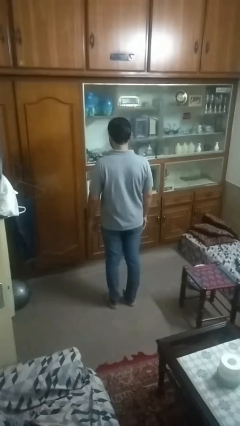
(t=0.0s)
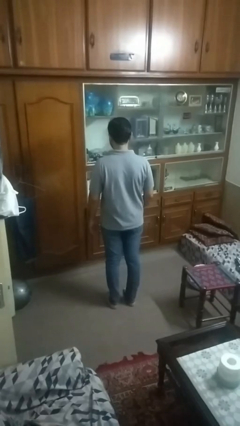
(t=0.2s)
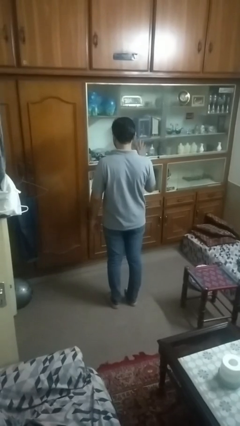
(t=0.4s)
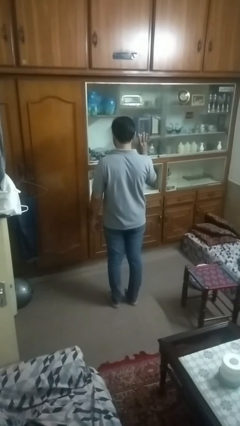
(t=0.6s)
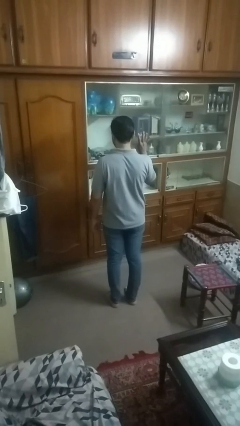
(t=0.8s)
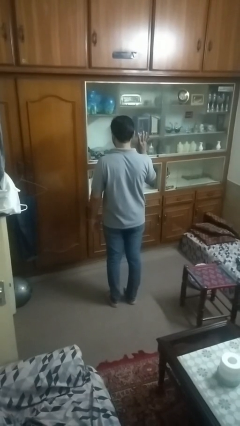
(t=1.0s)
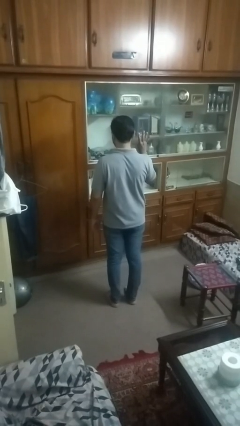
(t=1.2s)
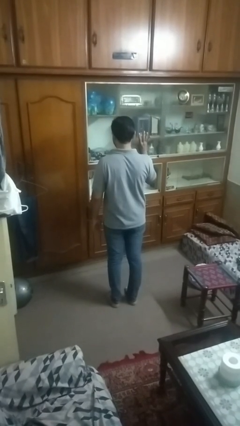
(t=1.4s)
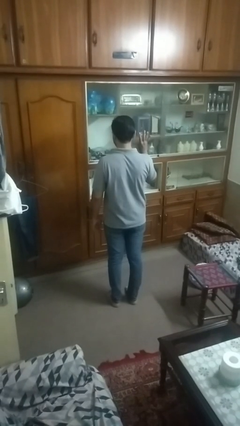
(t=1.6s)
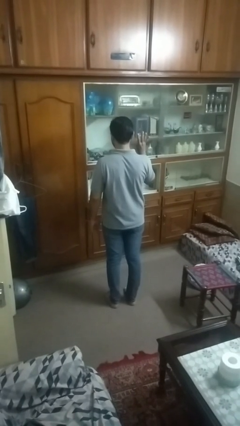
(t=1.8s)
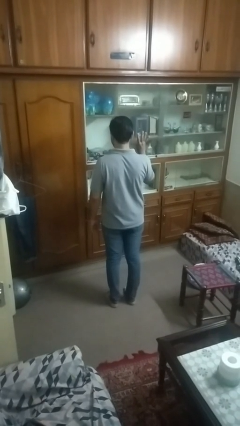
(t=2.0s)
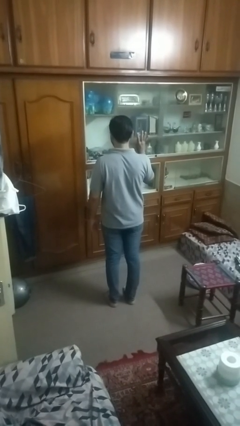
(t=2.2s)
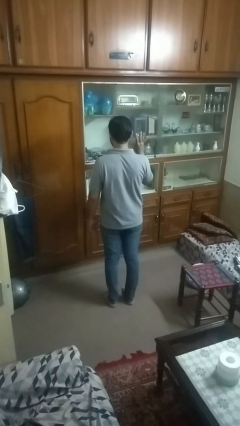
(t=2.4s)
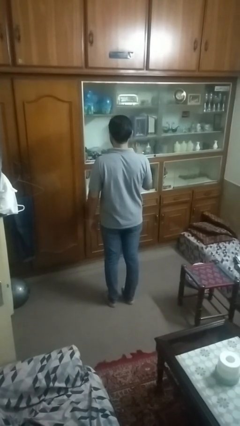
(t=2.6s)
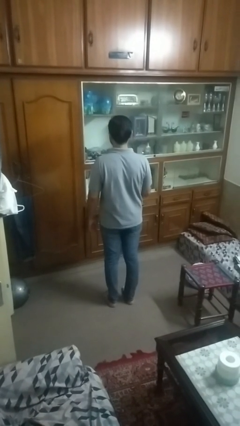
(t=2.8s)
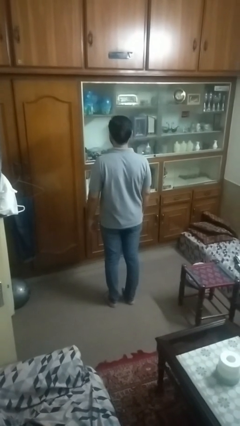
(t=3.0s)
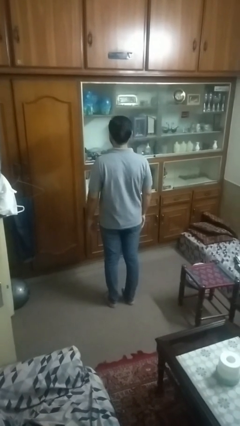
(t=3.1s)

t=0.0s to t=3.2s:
person gestures number four

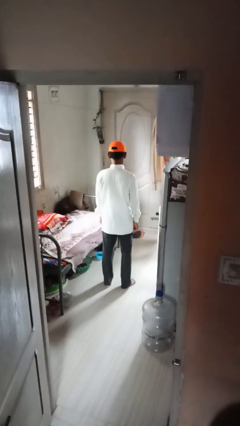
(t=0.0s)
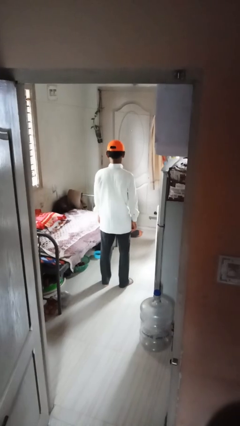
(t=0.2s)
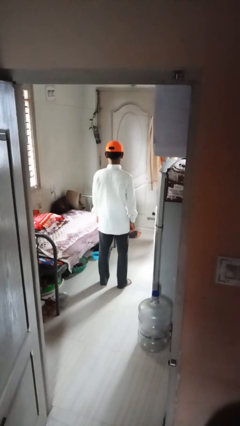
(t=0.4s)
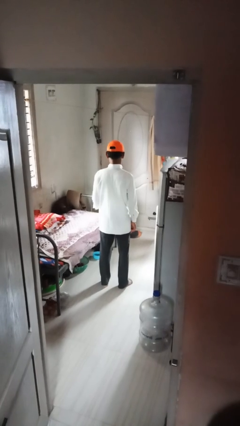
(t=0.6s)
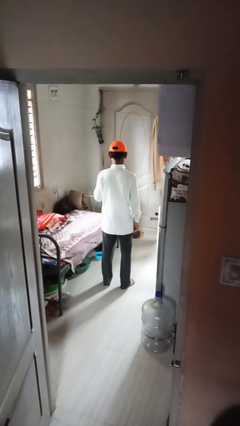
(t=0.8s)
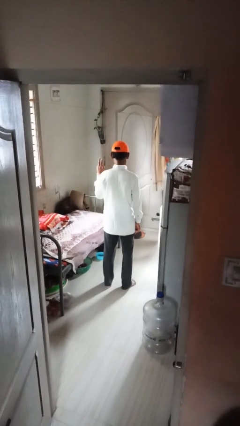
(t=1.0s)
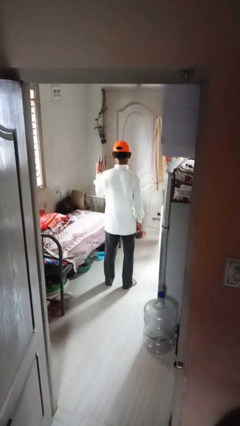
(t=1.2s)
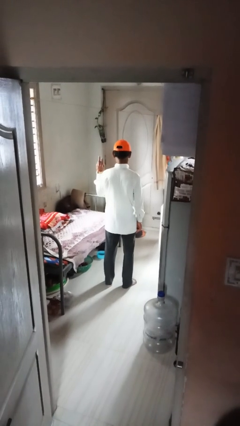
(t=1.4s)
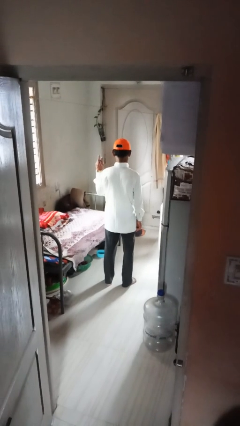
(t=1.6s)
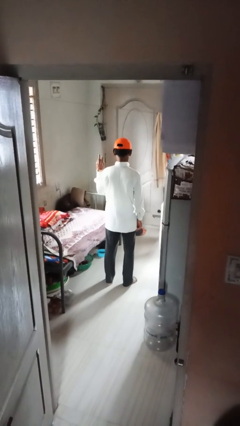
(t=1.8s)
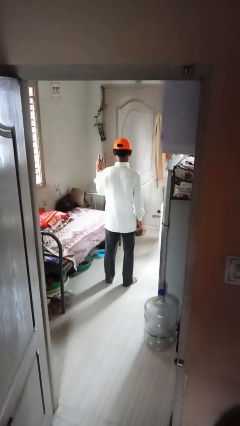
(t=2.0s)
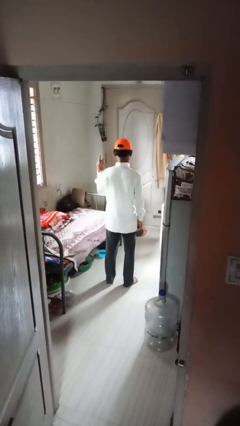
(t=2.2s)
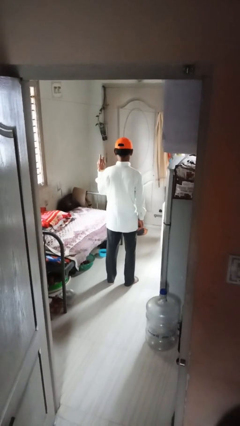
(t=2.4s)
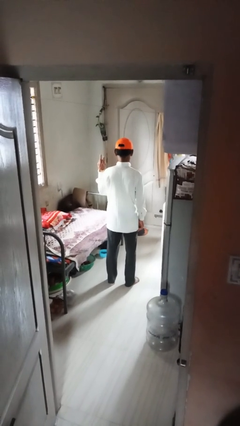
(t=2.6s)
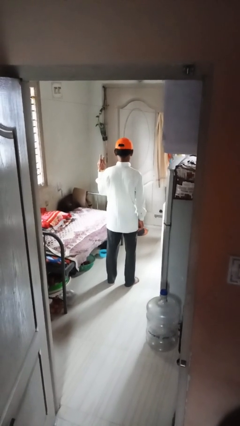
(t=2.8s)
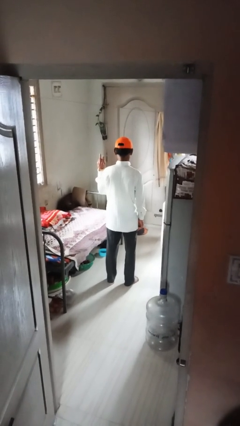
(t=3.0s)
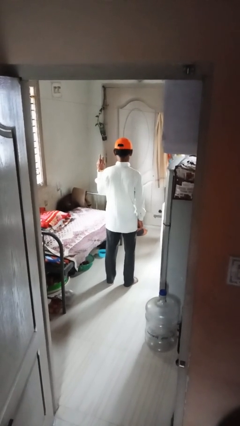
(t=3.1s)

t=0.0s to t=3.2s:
person gestures peace

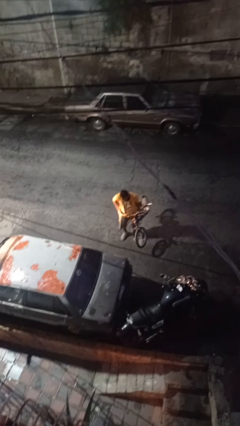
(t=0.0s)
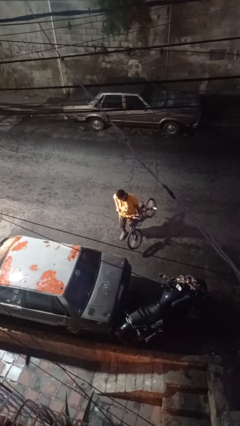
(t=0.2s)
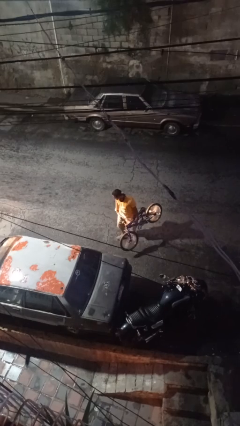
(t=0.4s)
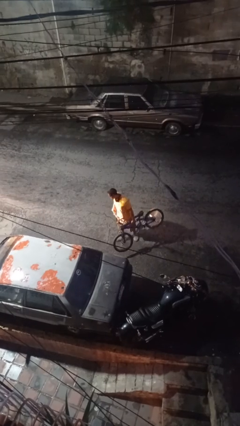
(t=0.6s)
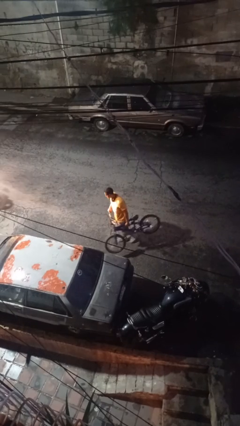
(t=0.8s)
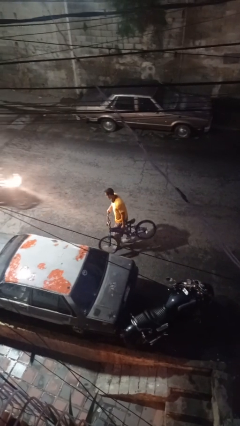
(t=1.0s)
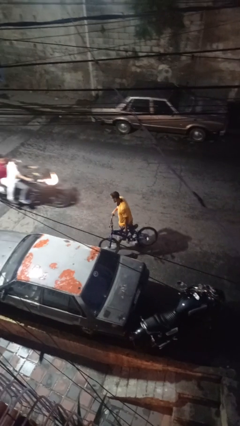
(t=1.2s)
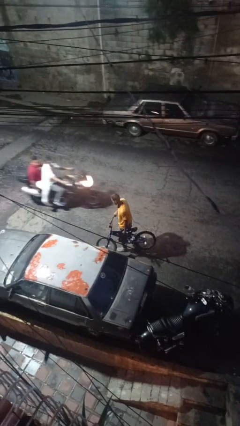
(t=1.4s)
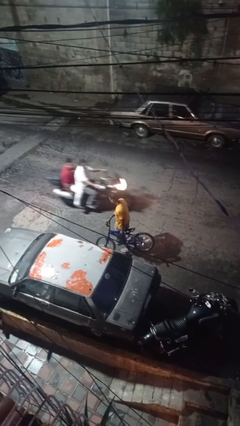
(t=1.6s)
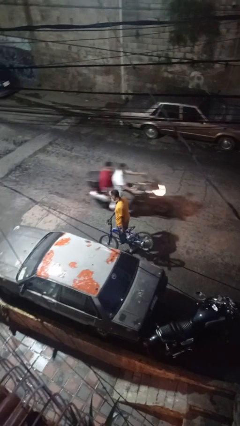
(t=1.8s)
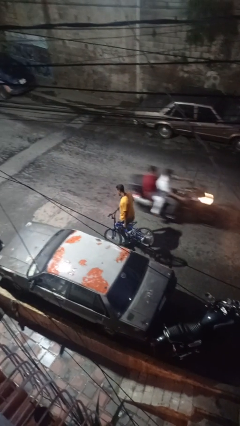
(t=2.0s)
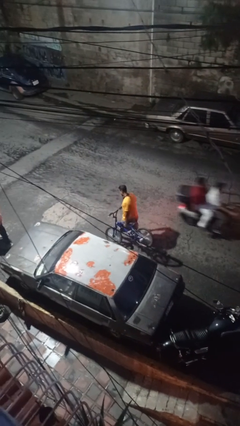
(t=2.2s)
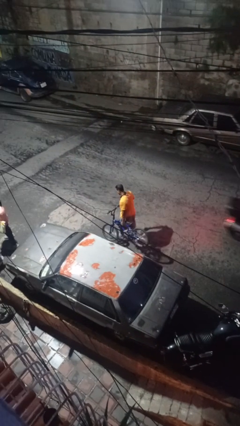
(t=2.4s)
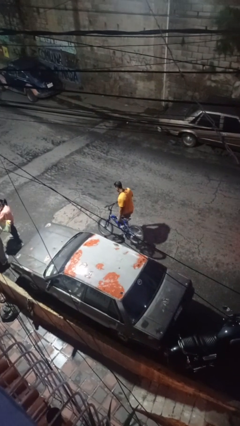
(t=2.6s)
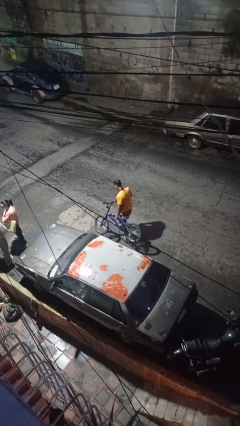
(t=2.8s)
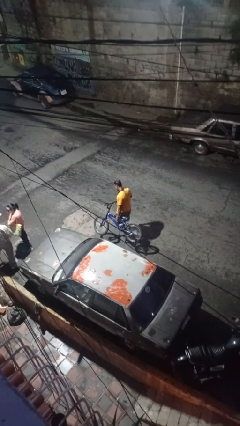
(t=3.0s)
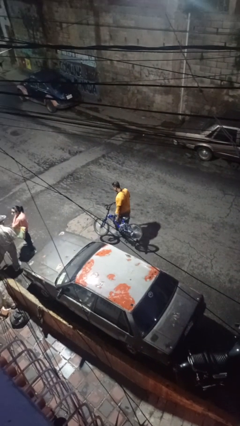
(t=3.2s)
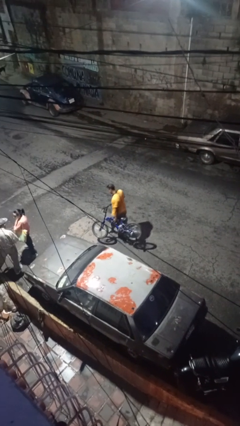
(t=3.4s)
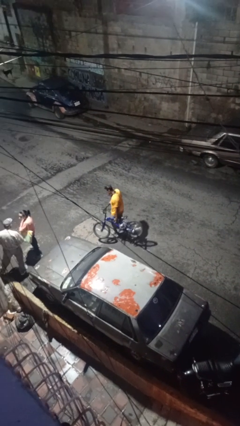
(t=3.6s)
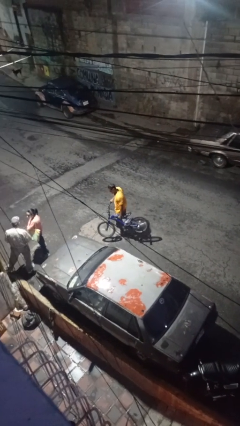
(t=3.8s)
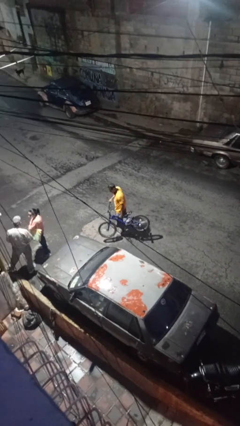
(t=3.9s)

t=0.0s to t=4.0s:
person carries bicycle

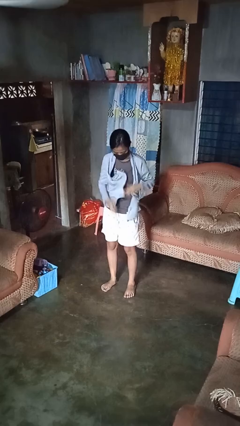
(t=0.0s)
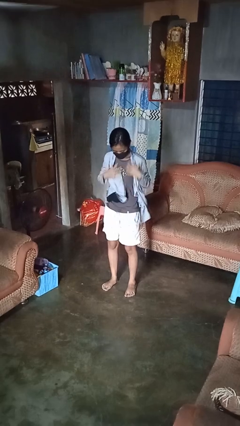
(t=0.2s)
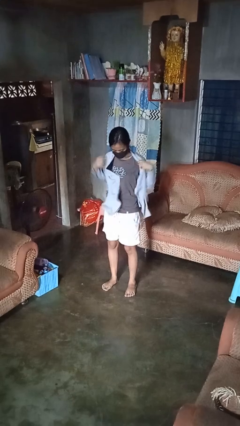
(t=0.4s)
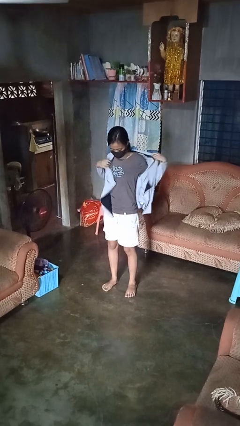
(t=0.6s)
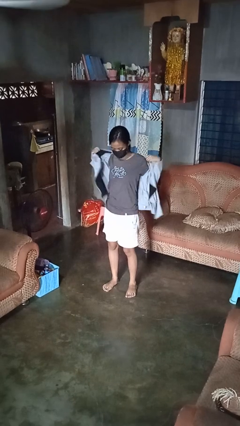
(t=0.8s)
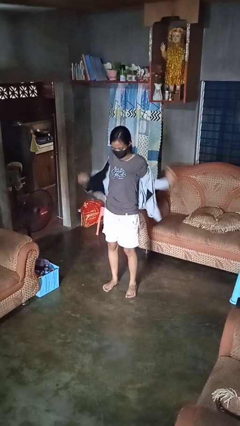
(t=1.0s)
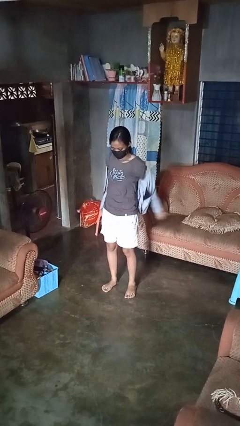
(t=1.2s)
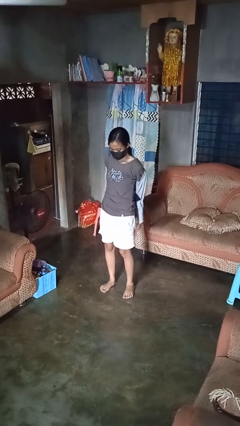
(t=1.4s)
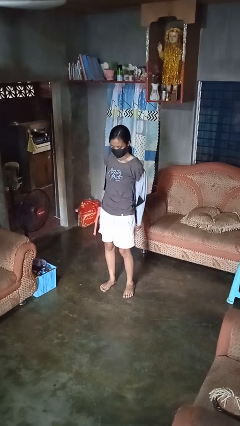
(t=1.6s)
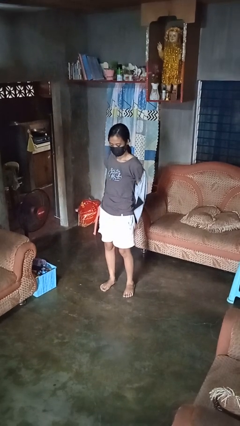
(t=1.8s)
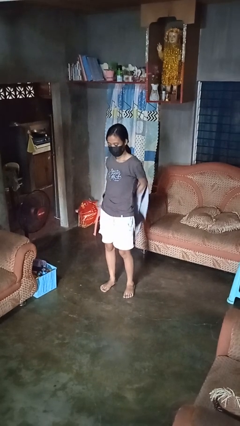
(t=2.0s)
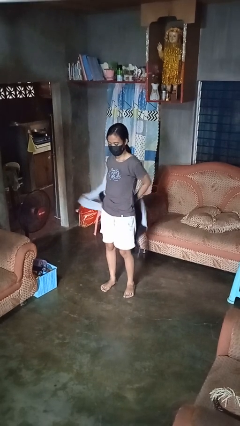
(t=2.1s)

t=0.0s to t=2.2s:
person takes off jacket

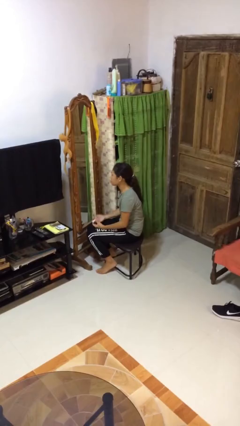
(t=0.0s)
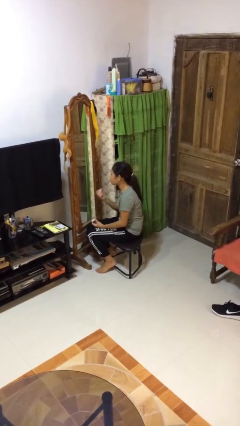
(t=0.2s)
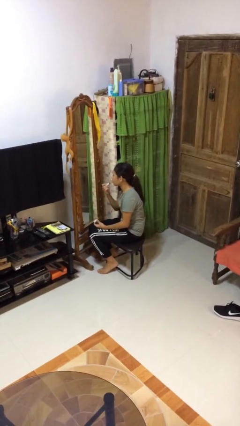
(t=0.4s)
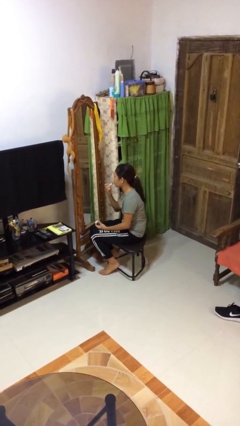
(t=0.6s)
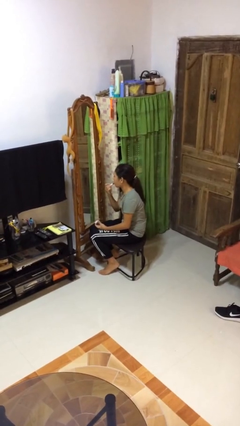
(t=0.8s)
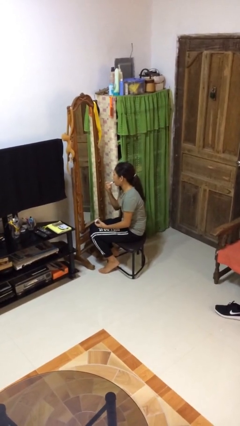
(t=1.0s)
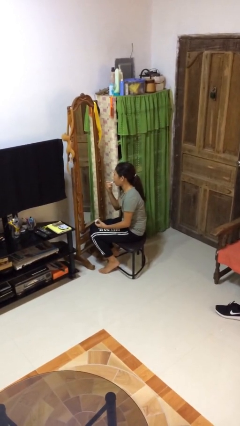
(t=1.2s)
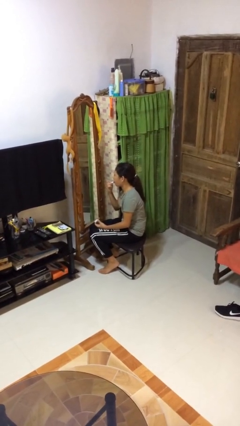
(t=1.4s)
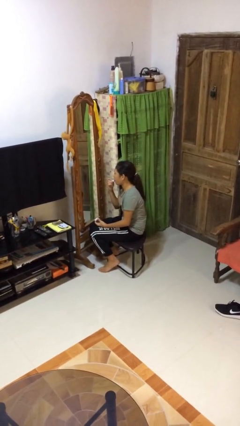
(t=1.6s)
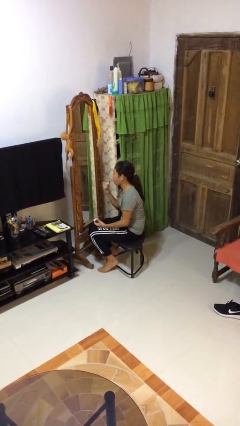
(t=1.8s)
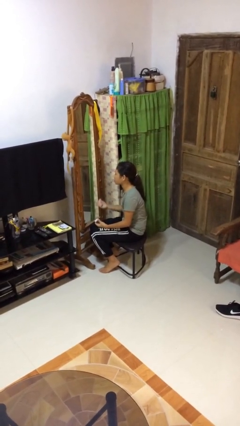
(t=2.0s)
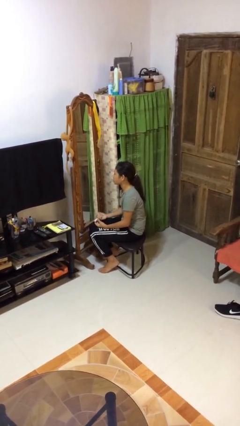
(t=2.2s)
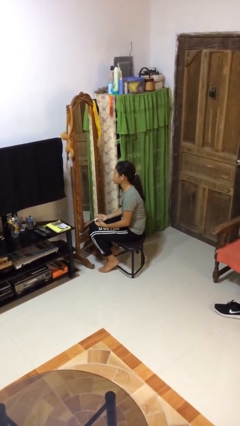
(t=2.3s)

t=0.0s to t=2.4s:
person applies lip makeup

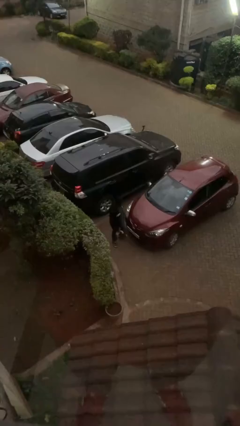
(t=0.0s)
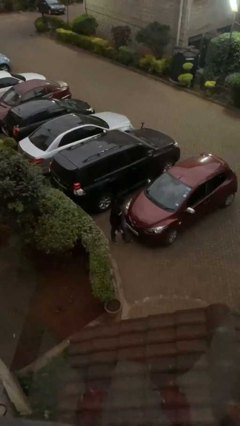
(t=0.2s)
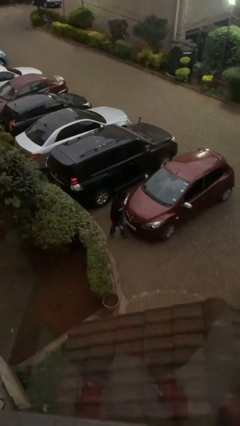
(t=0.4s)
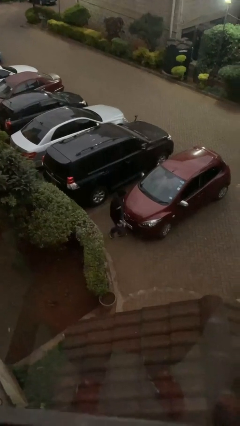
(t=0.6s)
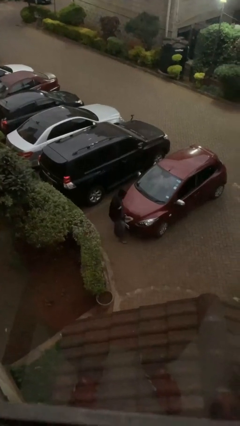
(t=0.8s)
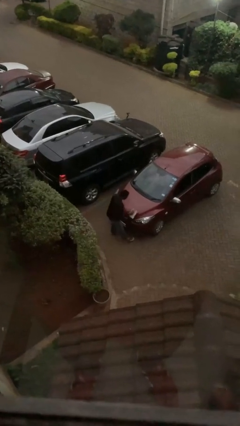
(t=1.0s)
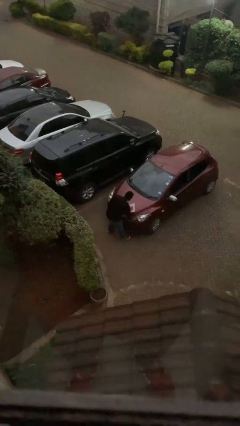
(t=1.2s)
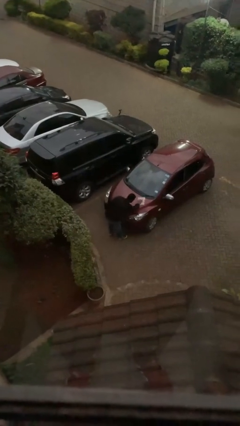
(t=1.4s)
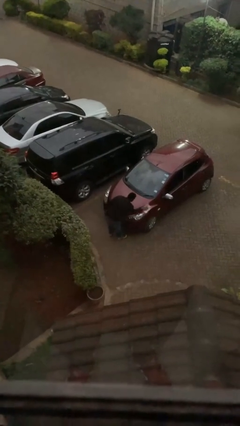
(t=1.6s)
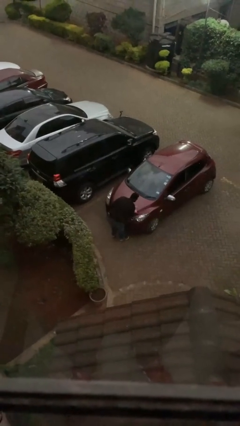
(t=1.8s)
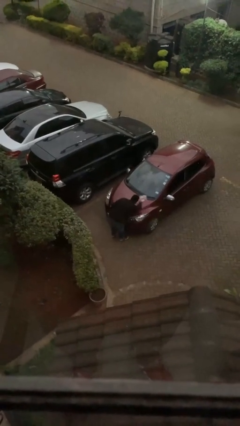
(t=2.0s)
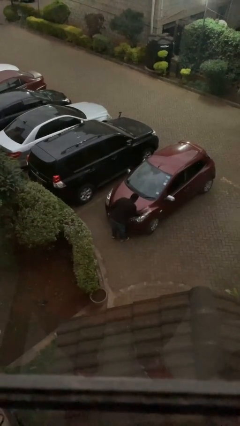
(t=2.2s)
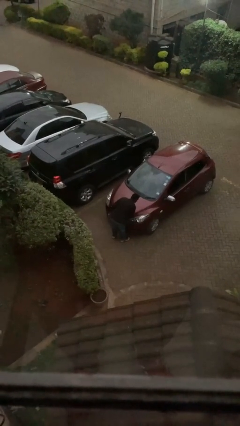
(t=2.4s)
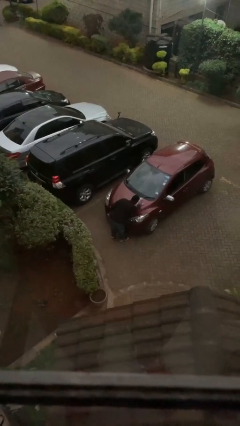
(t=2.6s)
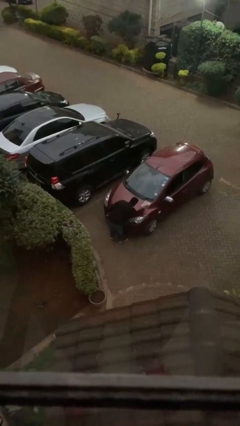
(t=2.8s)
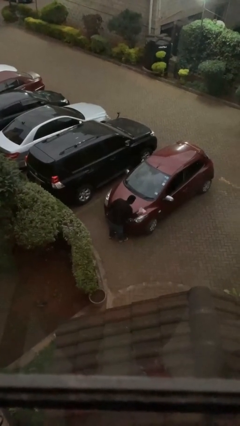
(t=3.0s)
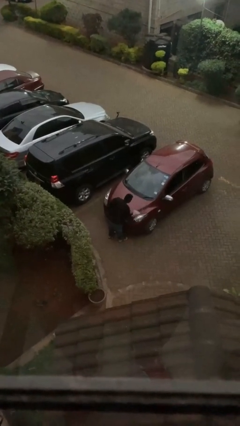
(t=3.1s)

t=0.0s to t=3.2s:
person polishes car with rag
